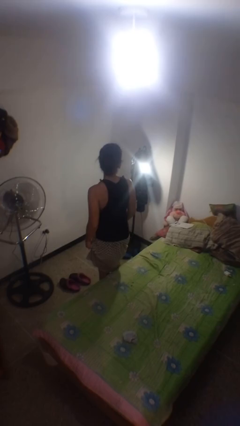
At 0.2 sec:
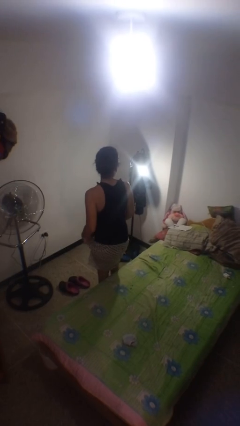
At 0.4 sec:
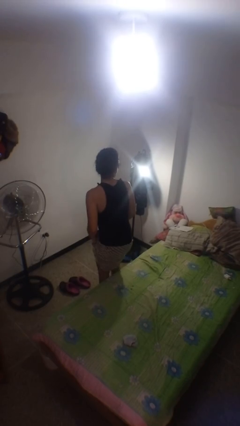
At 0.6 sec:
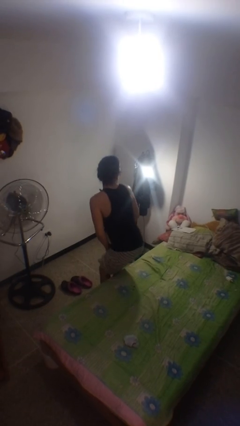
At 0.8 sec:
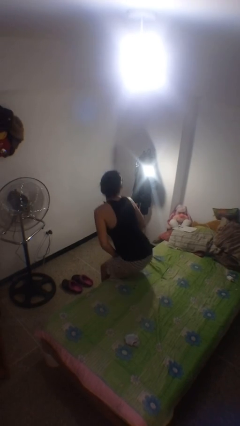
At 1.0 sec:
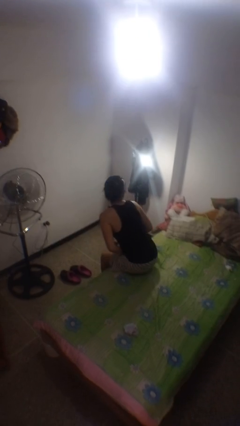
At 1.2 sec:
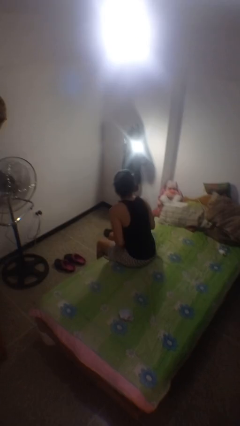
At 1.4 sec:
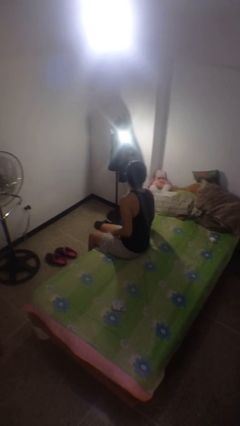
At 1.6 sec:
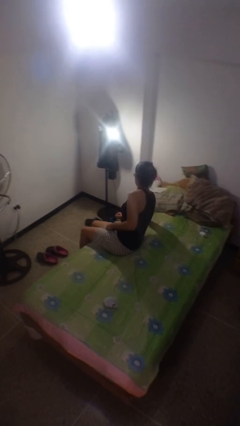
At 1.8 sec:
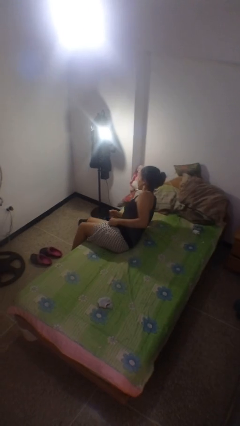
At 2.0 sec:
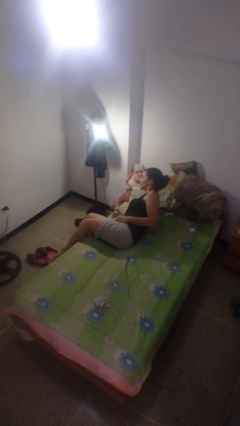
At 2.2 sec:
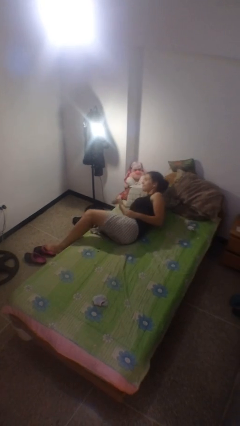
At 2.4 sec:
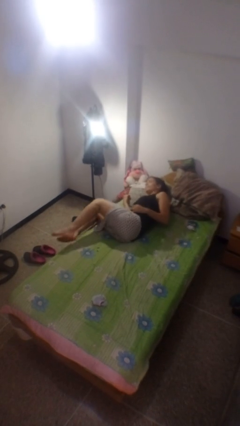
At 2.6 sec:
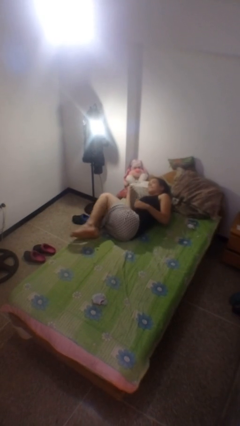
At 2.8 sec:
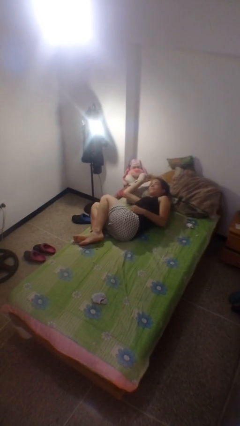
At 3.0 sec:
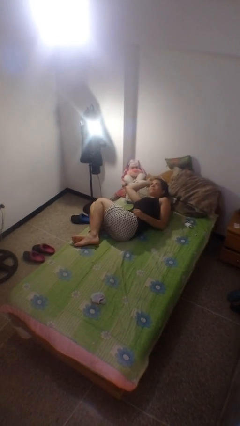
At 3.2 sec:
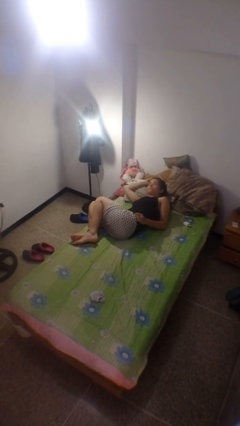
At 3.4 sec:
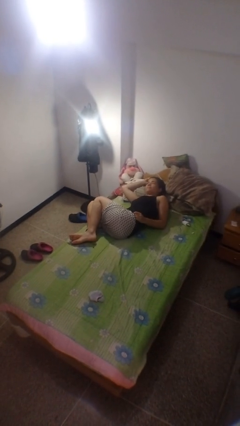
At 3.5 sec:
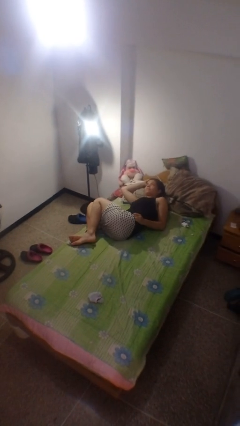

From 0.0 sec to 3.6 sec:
person lies down on bed

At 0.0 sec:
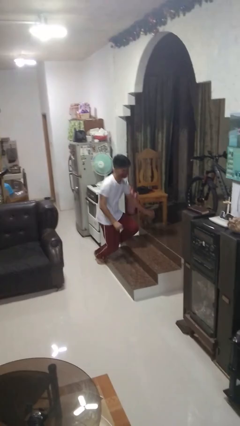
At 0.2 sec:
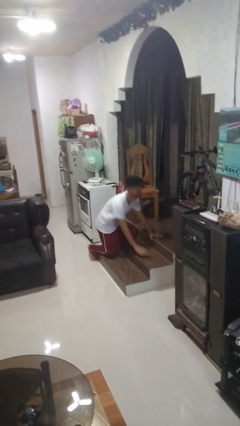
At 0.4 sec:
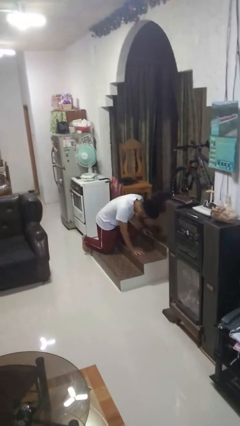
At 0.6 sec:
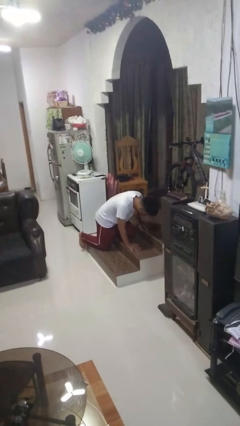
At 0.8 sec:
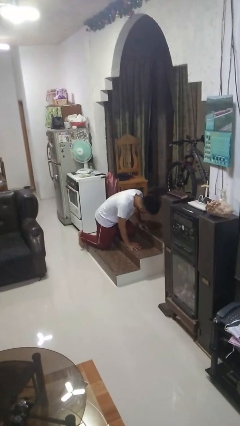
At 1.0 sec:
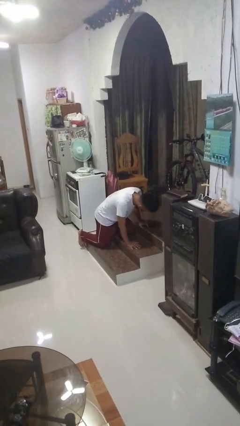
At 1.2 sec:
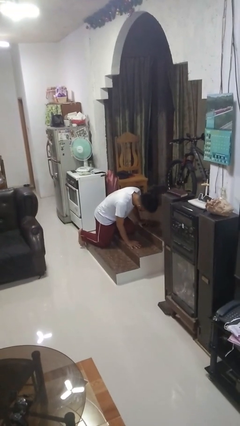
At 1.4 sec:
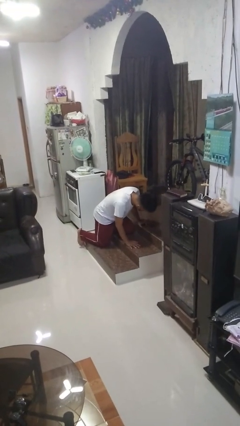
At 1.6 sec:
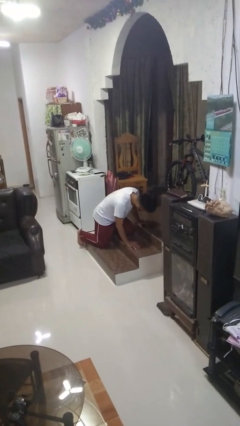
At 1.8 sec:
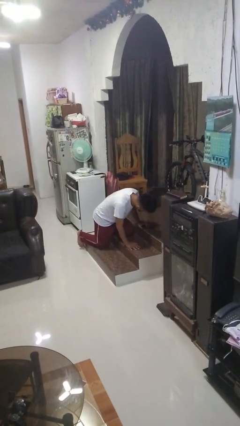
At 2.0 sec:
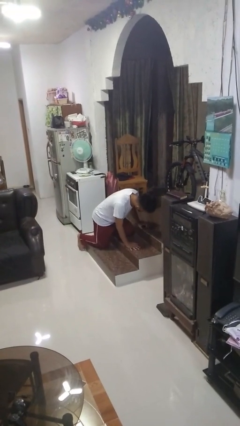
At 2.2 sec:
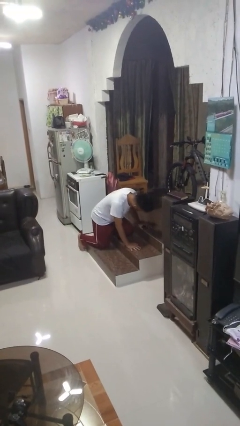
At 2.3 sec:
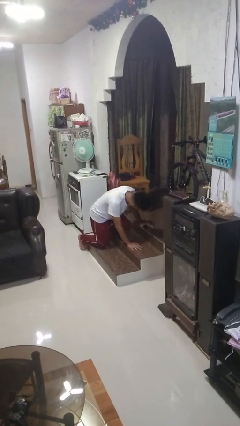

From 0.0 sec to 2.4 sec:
person trips on object on floor

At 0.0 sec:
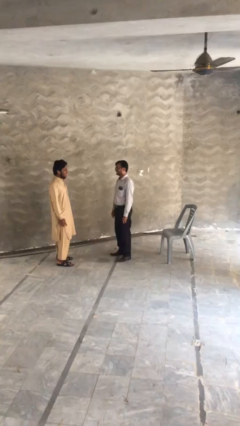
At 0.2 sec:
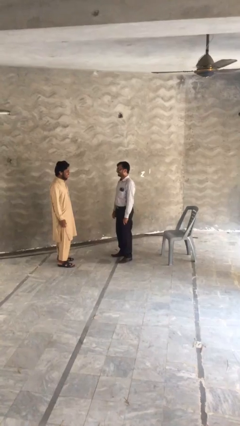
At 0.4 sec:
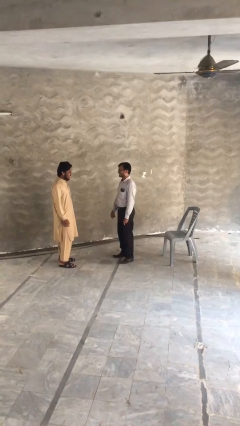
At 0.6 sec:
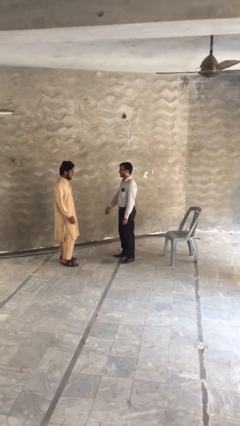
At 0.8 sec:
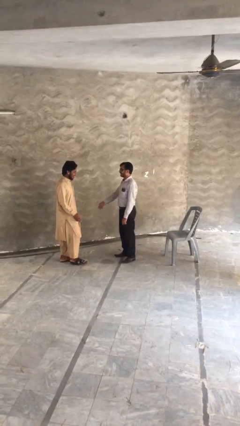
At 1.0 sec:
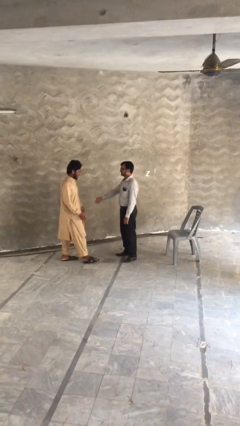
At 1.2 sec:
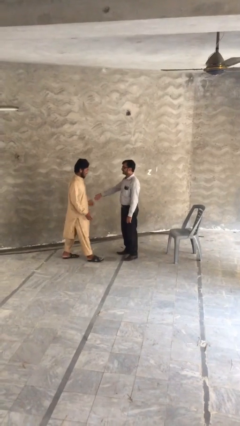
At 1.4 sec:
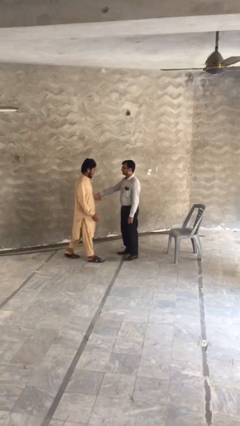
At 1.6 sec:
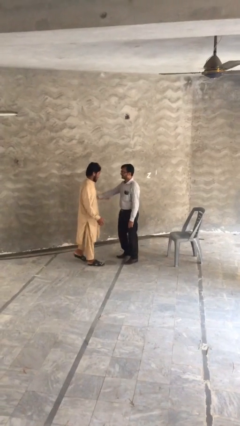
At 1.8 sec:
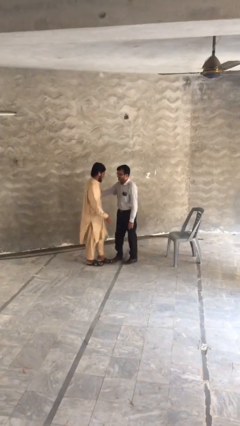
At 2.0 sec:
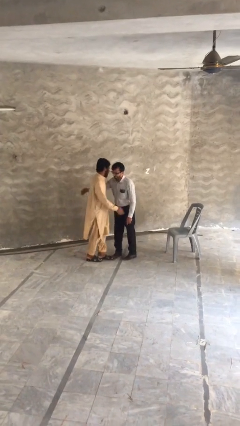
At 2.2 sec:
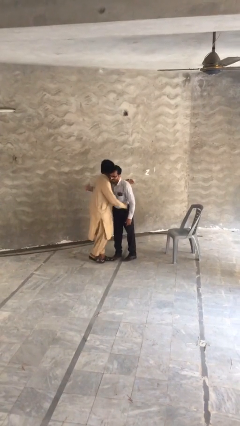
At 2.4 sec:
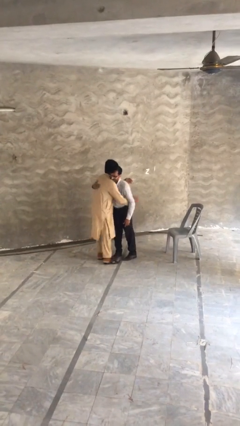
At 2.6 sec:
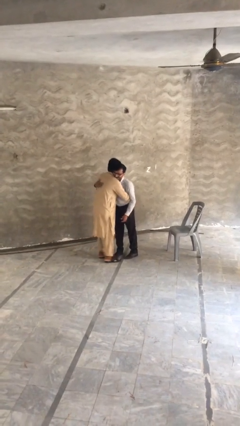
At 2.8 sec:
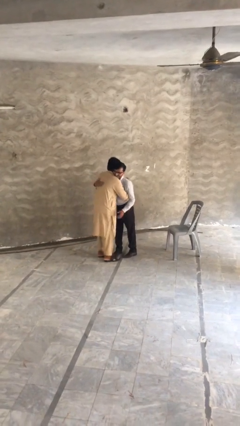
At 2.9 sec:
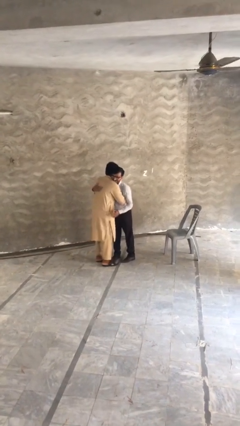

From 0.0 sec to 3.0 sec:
person embraces person

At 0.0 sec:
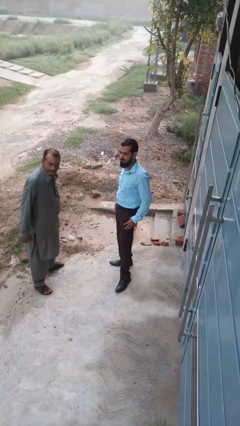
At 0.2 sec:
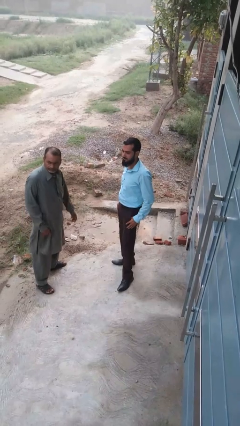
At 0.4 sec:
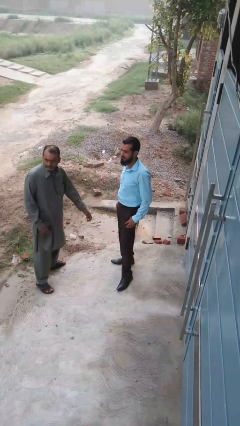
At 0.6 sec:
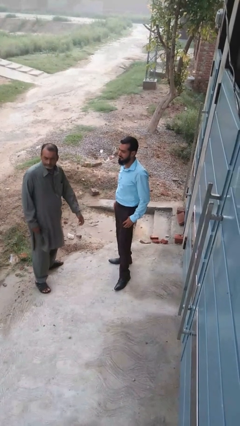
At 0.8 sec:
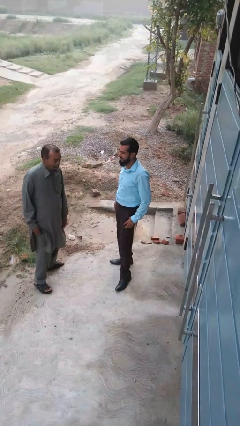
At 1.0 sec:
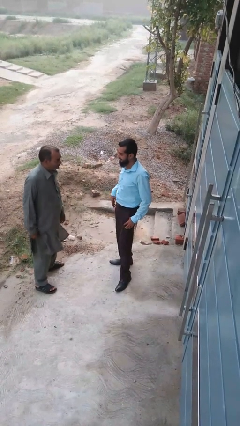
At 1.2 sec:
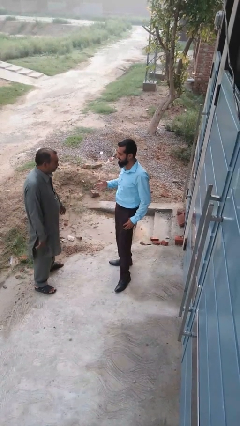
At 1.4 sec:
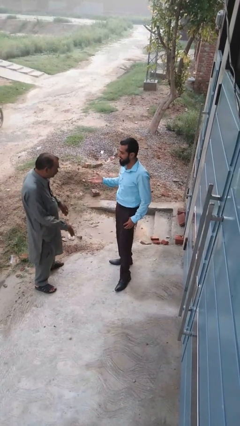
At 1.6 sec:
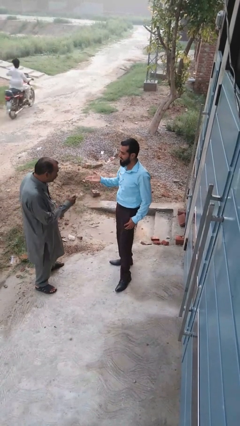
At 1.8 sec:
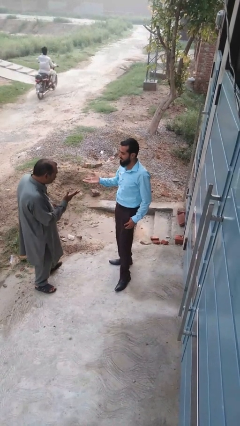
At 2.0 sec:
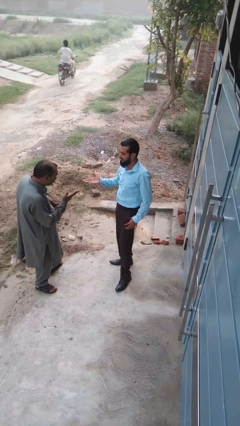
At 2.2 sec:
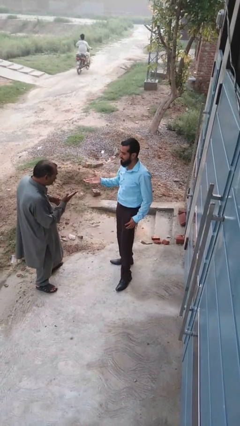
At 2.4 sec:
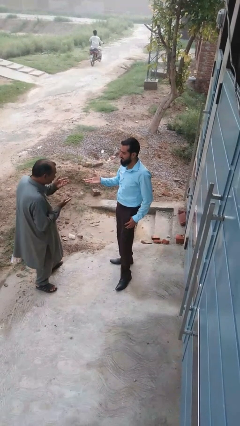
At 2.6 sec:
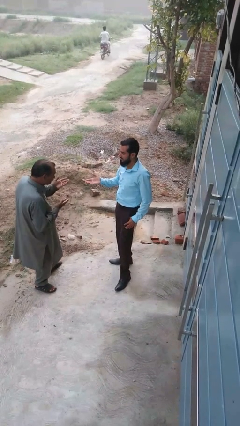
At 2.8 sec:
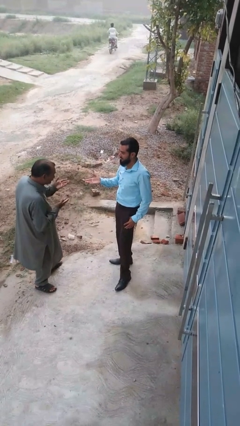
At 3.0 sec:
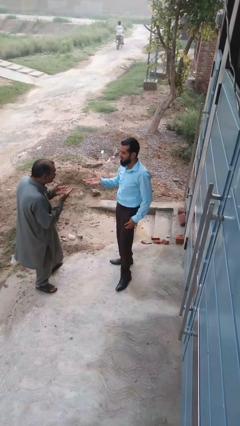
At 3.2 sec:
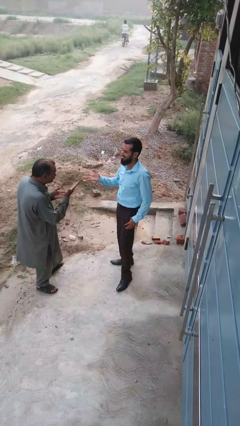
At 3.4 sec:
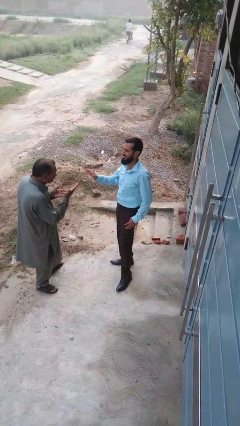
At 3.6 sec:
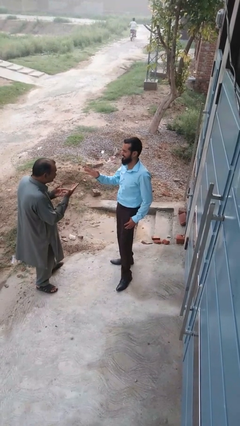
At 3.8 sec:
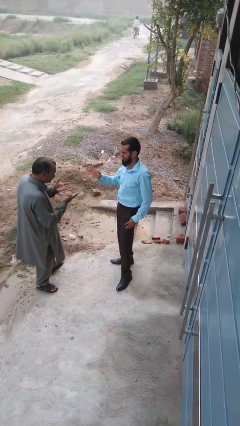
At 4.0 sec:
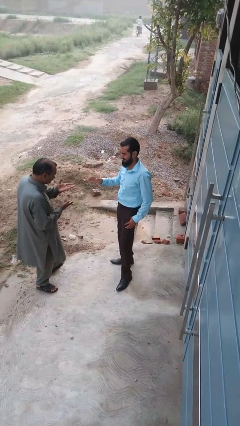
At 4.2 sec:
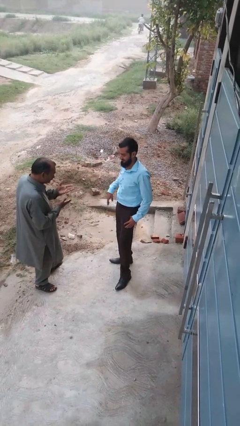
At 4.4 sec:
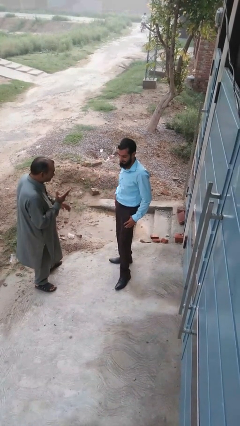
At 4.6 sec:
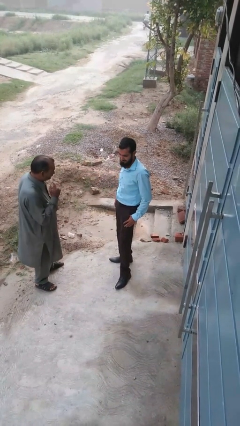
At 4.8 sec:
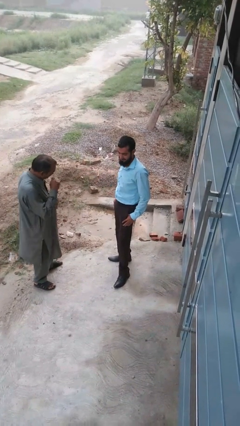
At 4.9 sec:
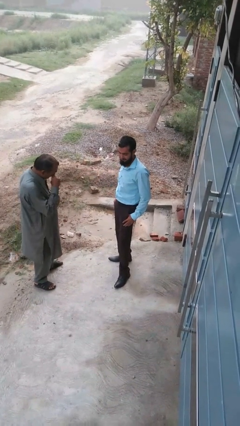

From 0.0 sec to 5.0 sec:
person talks to person

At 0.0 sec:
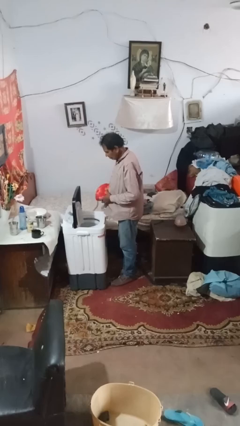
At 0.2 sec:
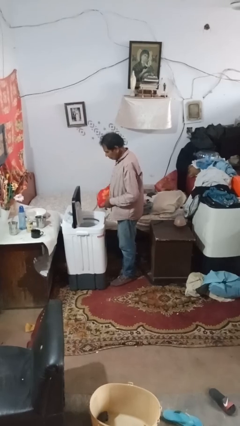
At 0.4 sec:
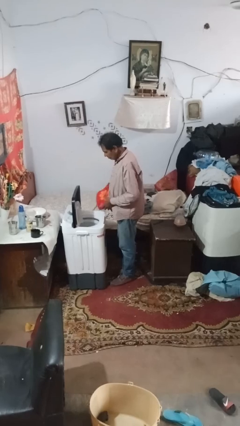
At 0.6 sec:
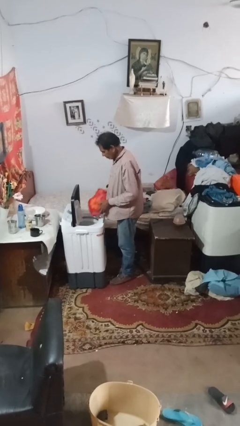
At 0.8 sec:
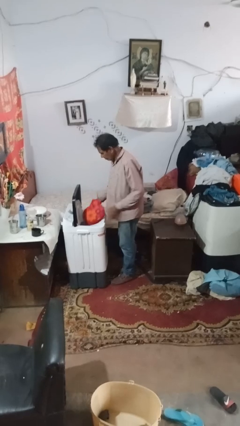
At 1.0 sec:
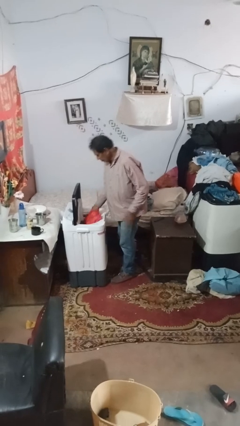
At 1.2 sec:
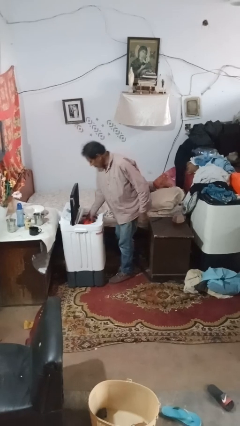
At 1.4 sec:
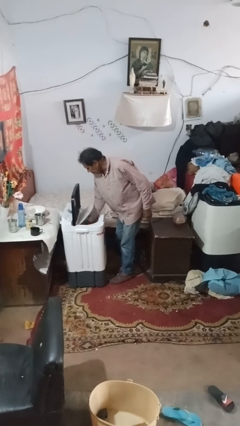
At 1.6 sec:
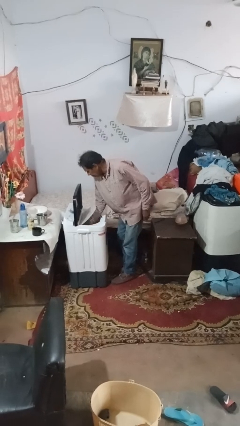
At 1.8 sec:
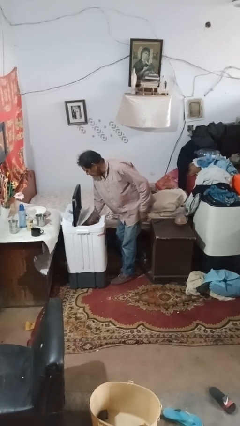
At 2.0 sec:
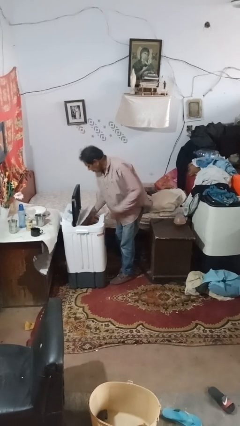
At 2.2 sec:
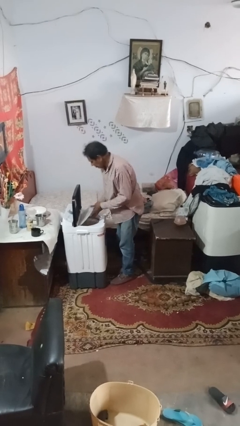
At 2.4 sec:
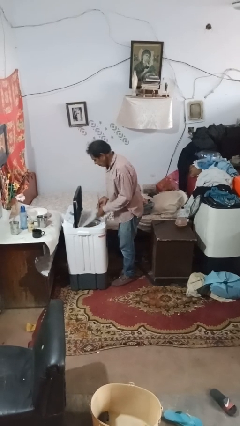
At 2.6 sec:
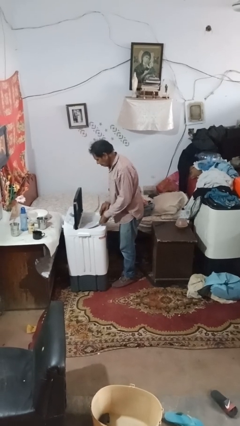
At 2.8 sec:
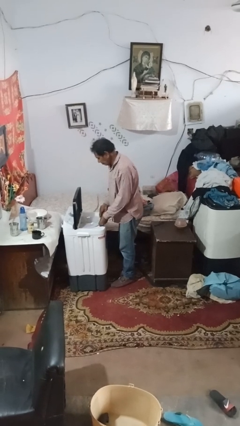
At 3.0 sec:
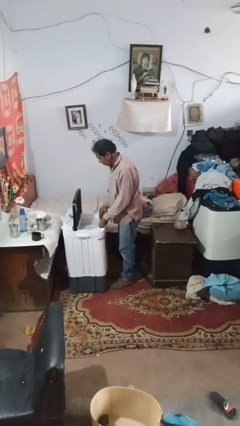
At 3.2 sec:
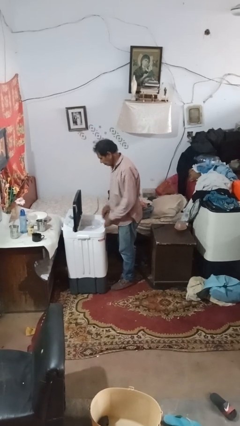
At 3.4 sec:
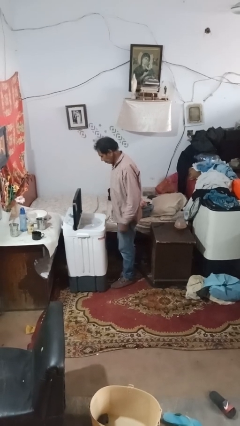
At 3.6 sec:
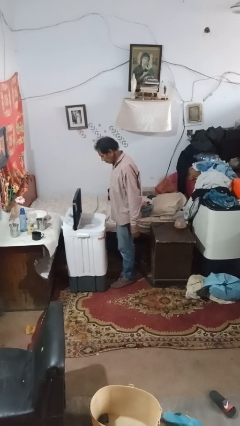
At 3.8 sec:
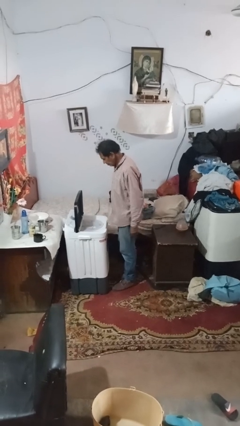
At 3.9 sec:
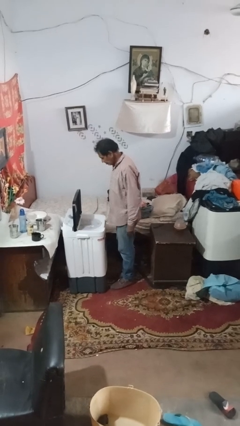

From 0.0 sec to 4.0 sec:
person loads dryer
